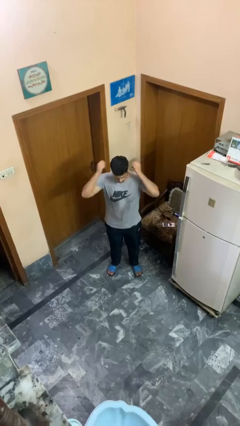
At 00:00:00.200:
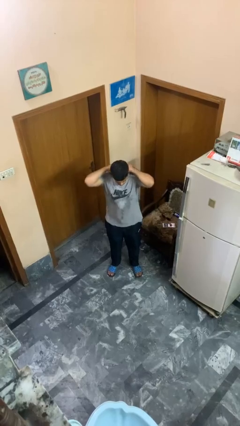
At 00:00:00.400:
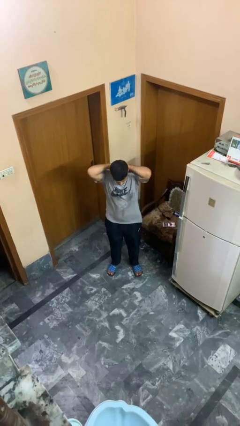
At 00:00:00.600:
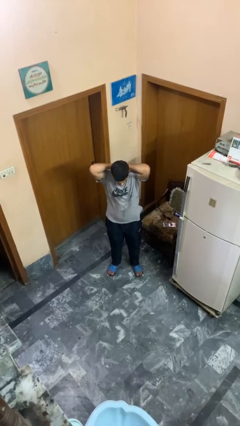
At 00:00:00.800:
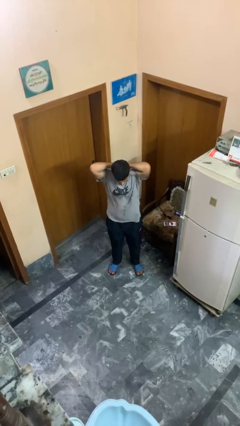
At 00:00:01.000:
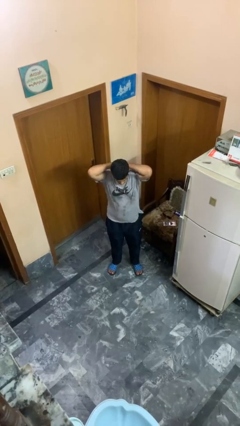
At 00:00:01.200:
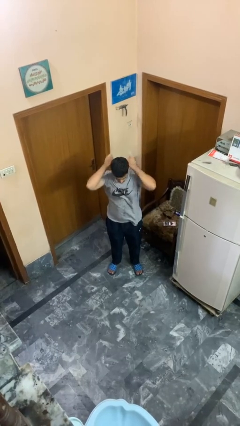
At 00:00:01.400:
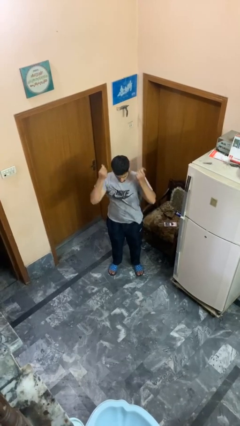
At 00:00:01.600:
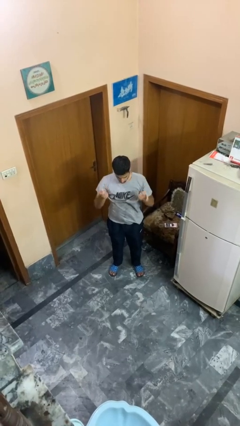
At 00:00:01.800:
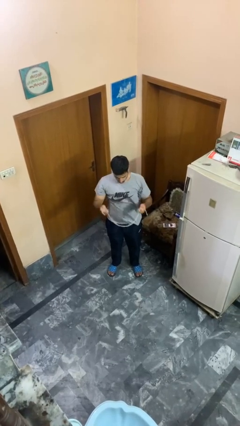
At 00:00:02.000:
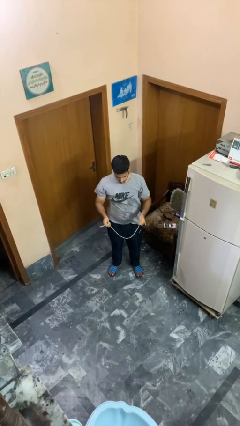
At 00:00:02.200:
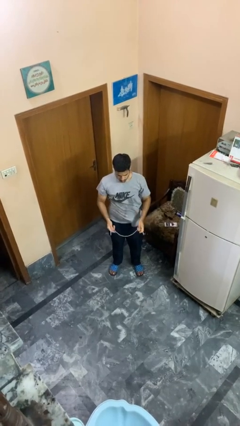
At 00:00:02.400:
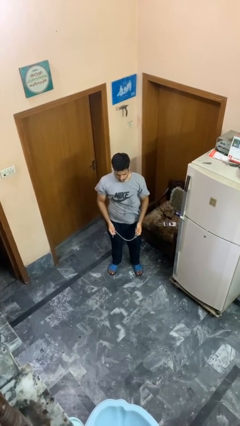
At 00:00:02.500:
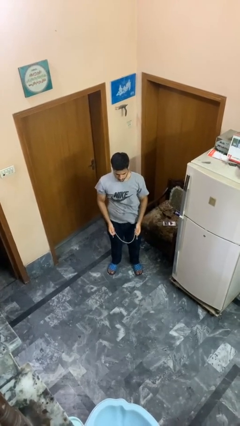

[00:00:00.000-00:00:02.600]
person takes off necklace

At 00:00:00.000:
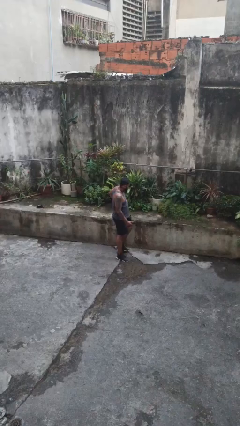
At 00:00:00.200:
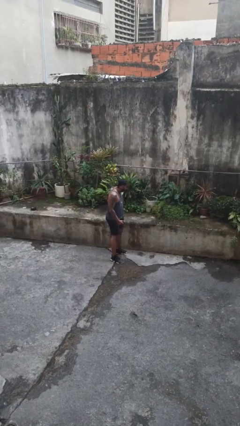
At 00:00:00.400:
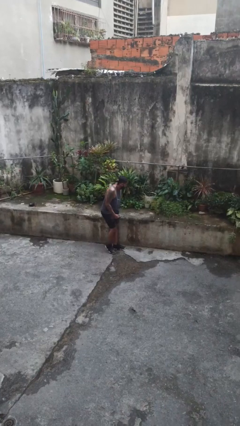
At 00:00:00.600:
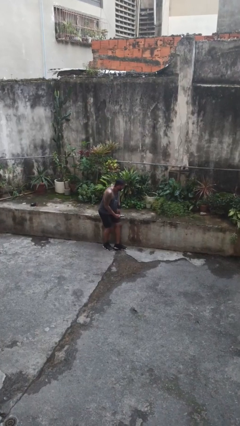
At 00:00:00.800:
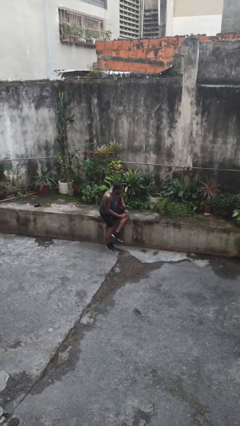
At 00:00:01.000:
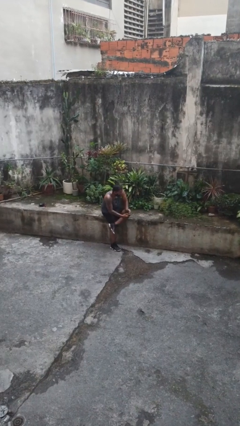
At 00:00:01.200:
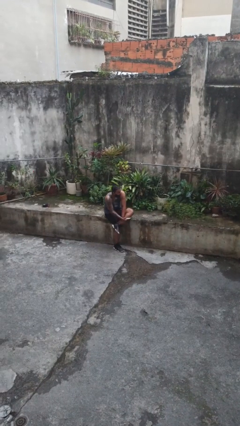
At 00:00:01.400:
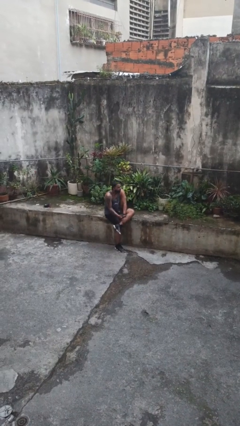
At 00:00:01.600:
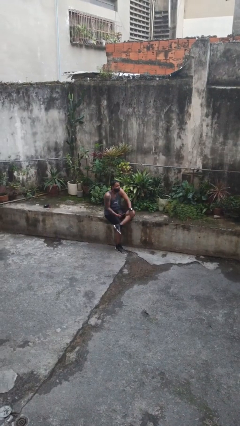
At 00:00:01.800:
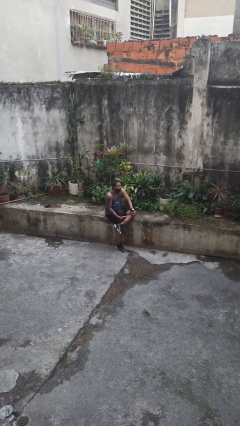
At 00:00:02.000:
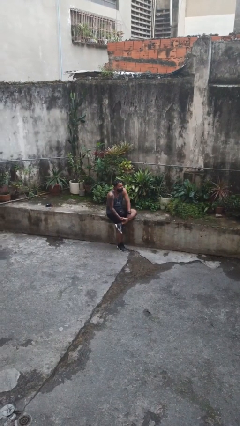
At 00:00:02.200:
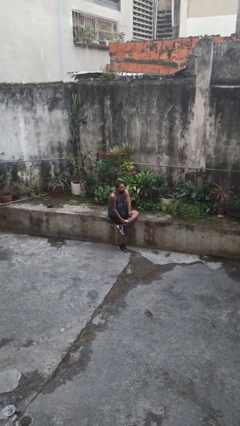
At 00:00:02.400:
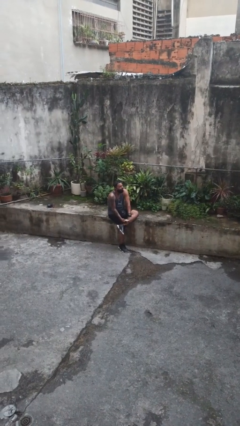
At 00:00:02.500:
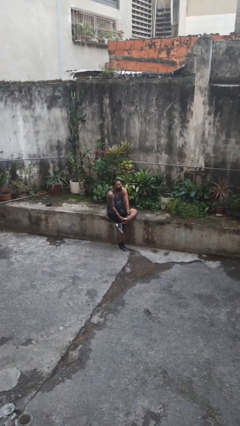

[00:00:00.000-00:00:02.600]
person sits down

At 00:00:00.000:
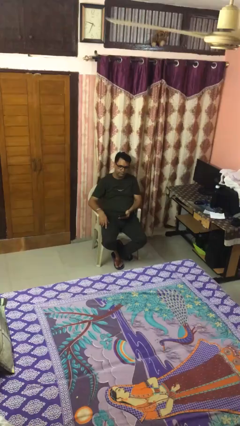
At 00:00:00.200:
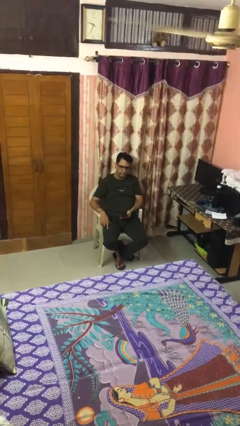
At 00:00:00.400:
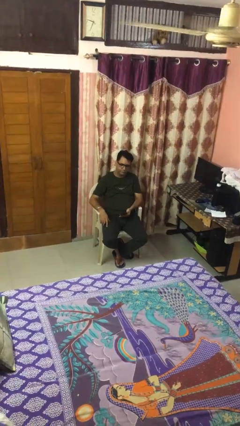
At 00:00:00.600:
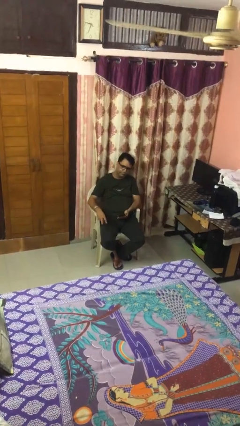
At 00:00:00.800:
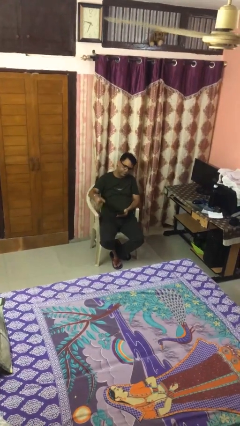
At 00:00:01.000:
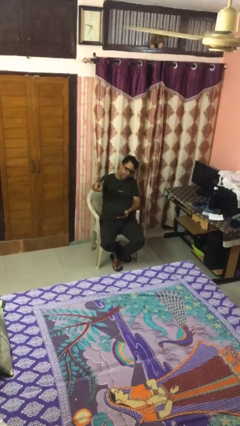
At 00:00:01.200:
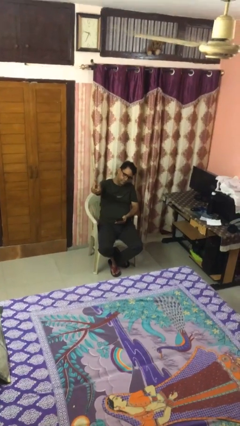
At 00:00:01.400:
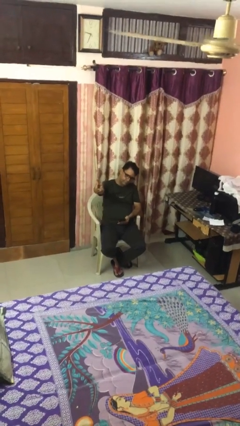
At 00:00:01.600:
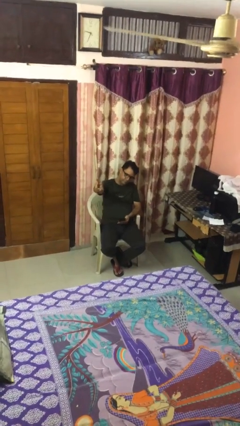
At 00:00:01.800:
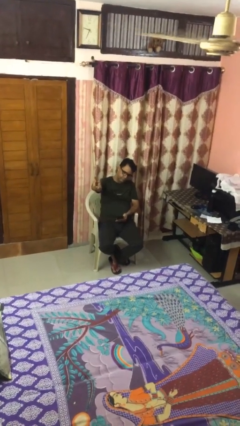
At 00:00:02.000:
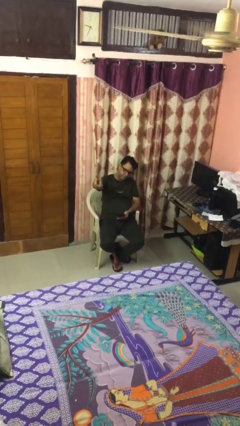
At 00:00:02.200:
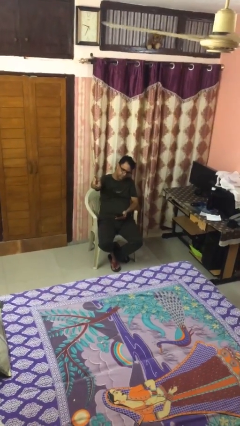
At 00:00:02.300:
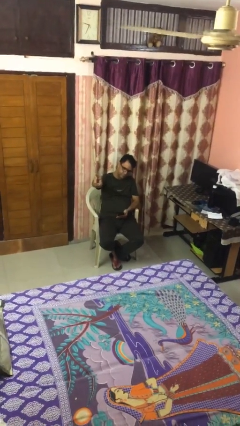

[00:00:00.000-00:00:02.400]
person gestures peace

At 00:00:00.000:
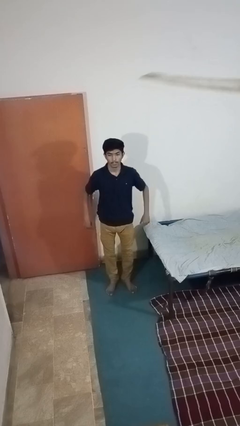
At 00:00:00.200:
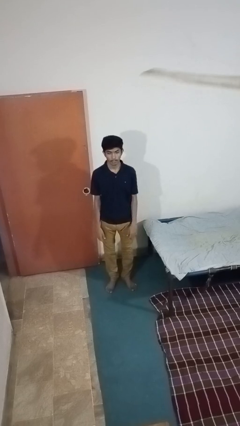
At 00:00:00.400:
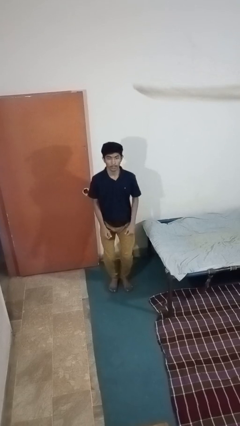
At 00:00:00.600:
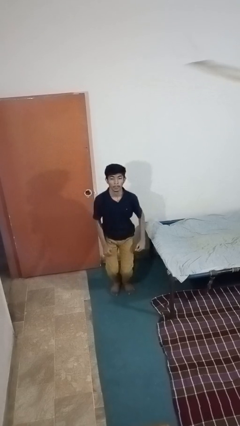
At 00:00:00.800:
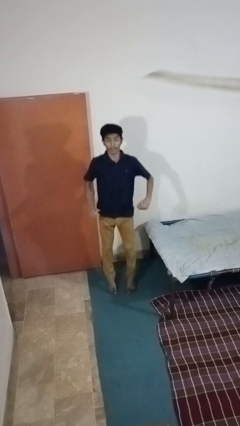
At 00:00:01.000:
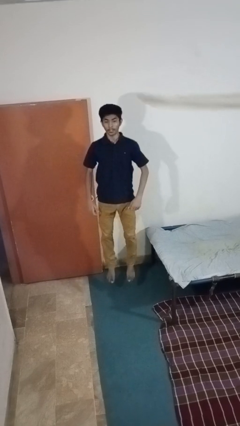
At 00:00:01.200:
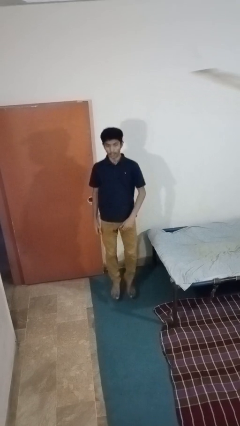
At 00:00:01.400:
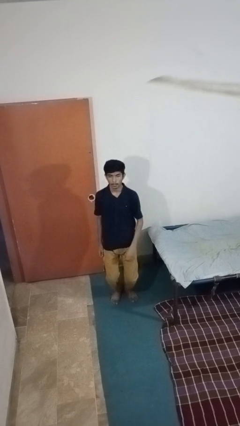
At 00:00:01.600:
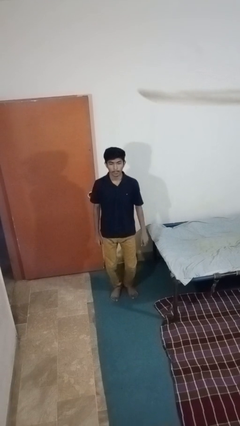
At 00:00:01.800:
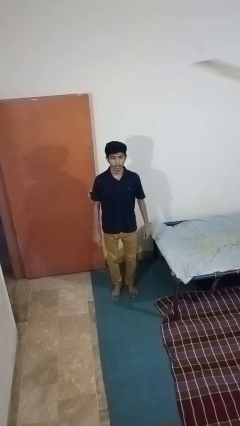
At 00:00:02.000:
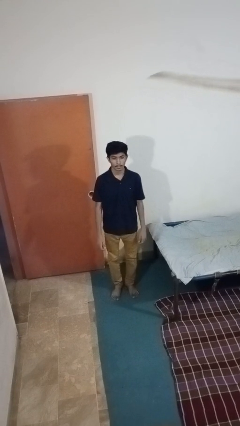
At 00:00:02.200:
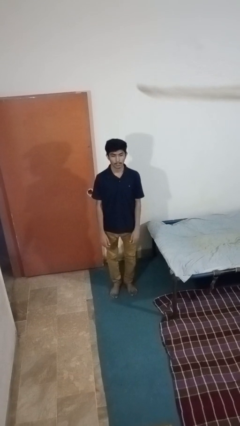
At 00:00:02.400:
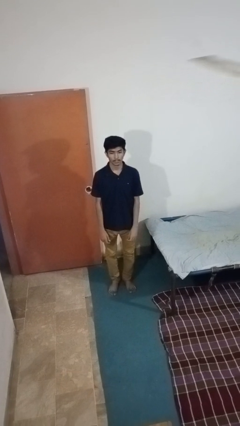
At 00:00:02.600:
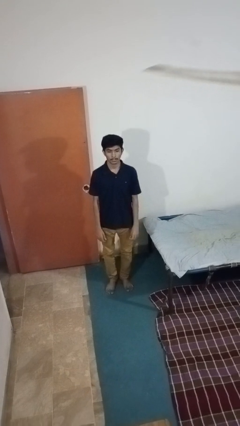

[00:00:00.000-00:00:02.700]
person jumps

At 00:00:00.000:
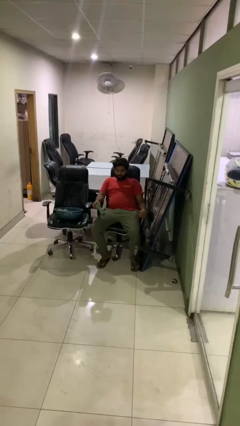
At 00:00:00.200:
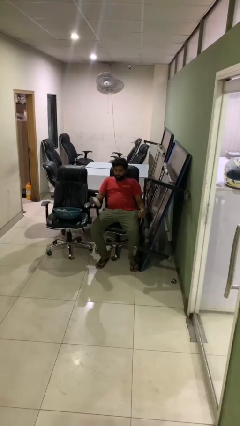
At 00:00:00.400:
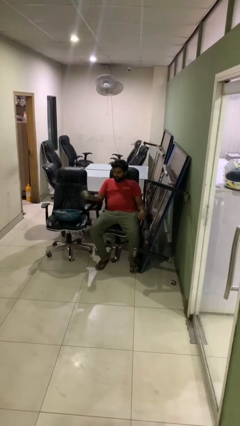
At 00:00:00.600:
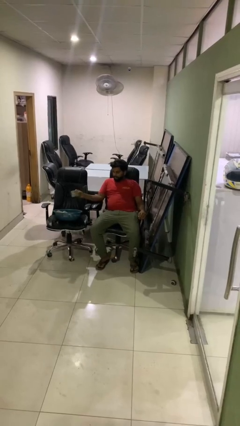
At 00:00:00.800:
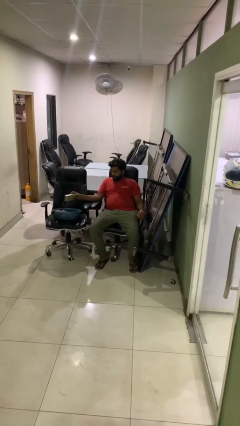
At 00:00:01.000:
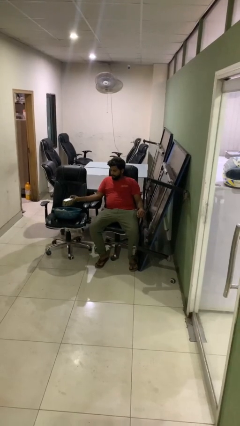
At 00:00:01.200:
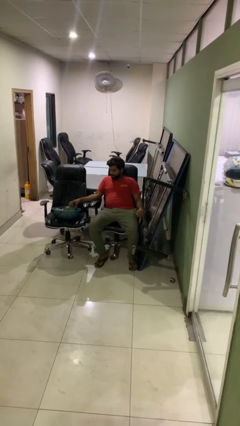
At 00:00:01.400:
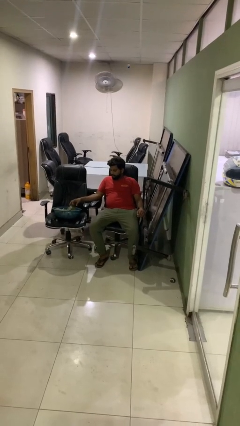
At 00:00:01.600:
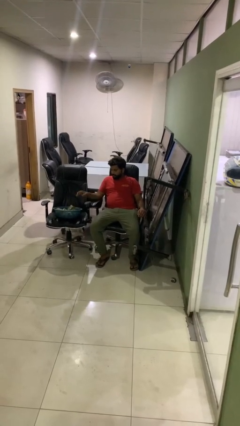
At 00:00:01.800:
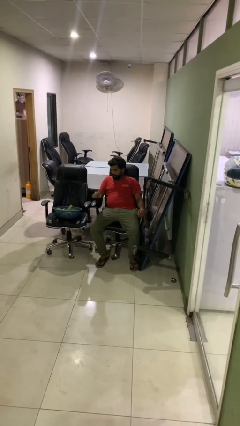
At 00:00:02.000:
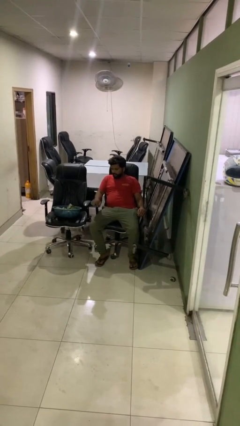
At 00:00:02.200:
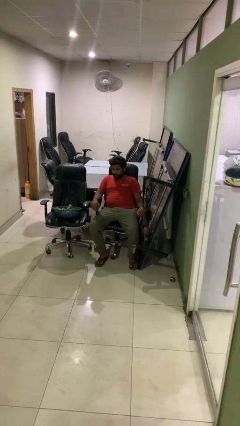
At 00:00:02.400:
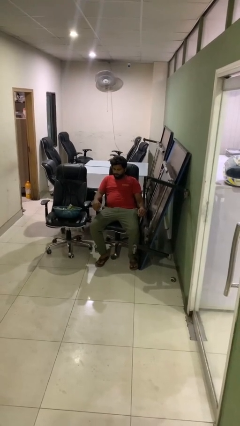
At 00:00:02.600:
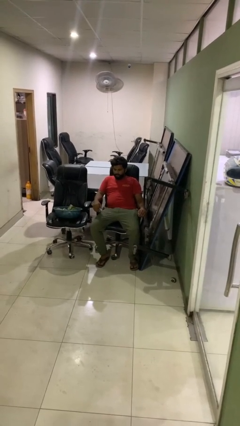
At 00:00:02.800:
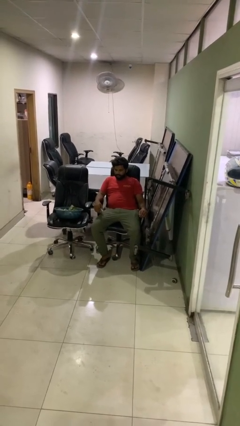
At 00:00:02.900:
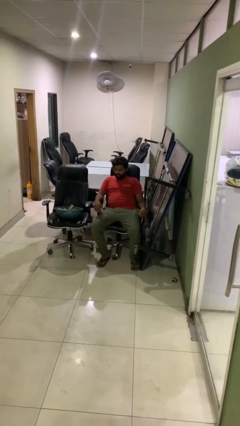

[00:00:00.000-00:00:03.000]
person puts object into basket

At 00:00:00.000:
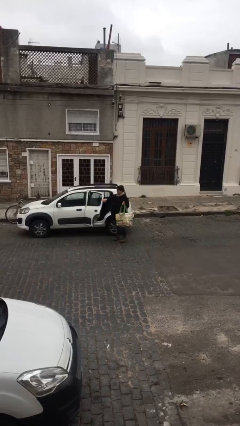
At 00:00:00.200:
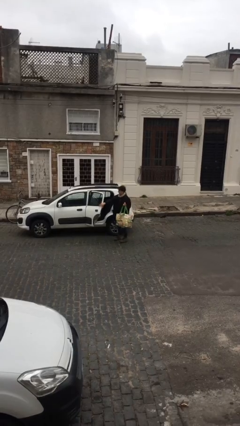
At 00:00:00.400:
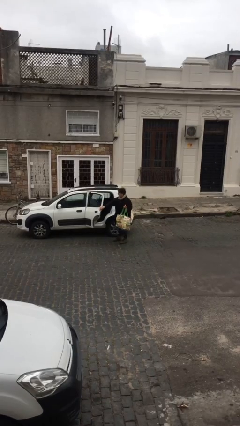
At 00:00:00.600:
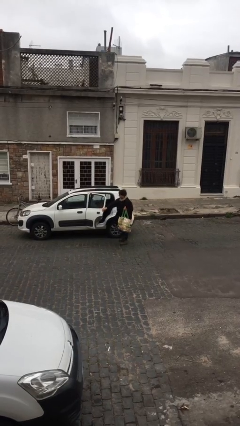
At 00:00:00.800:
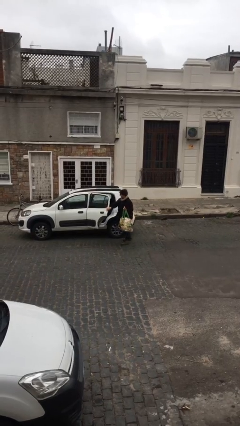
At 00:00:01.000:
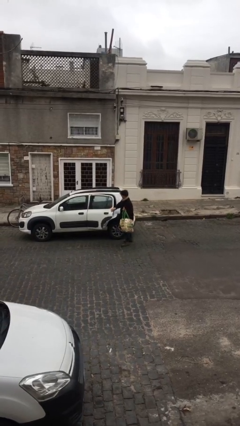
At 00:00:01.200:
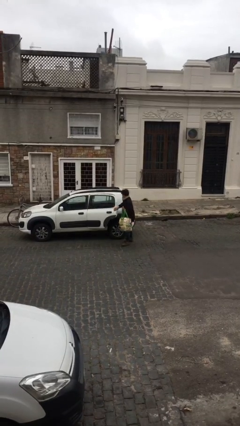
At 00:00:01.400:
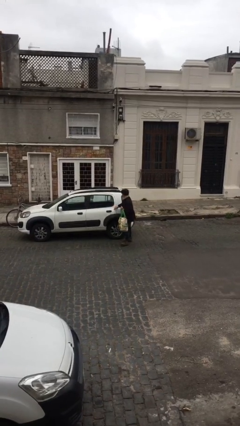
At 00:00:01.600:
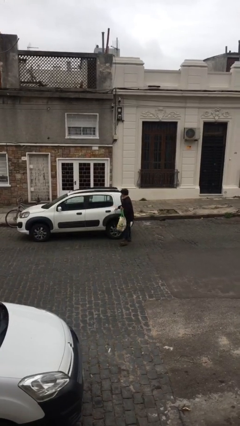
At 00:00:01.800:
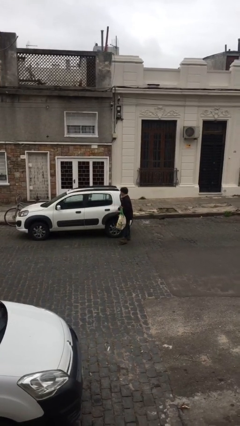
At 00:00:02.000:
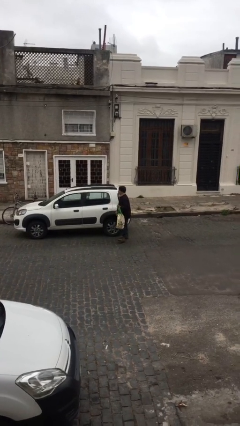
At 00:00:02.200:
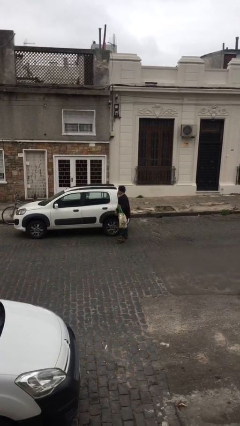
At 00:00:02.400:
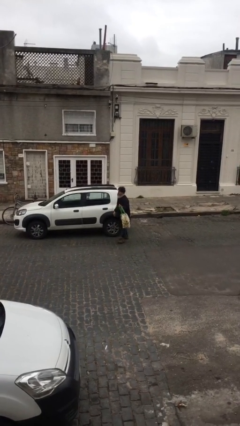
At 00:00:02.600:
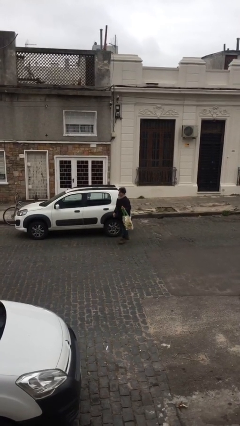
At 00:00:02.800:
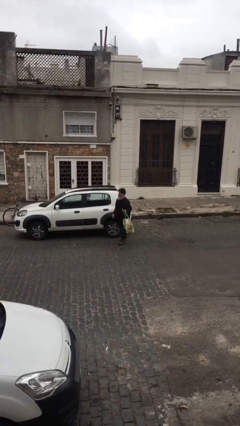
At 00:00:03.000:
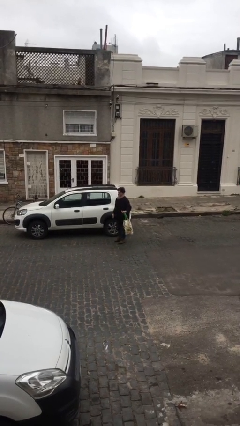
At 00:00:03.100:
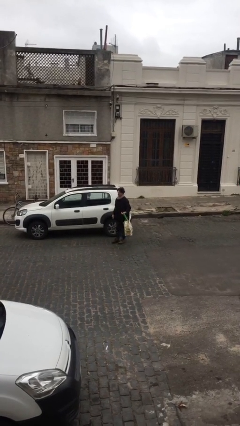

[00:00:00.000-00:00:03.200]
person closes car door

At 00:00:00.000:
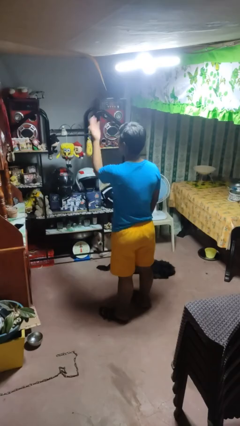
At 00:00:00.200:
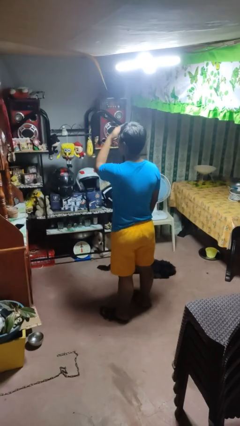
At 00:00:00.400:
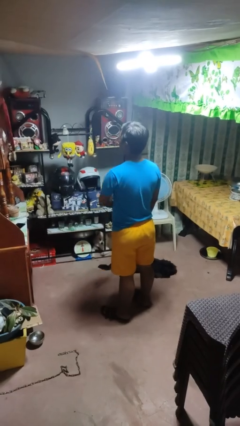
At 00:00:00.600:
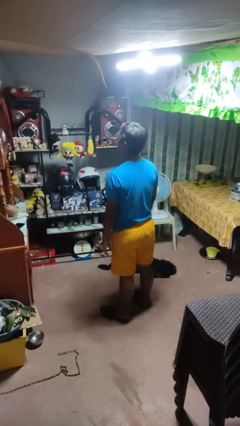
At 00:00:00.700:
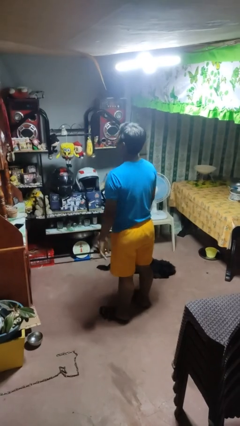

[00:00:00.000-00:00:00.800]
person gestures swipe up
